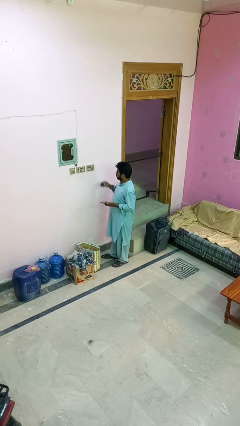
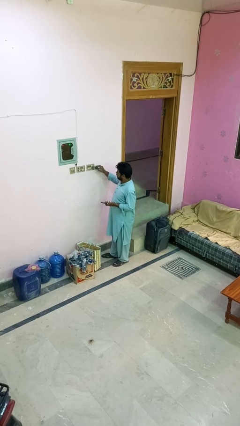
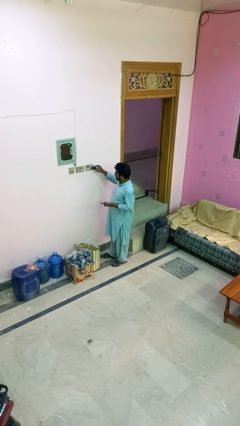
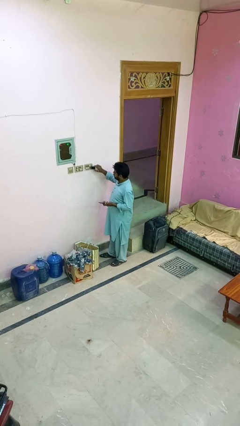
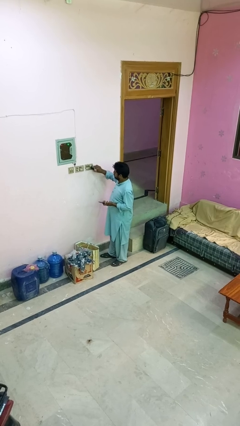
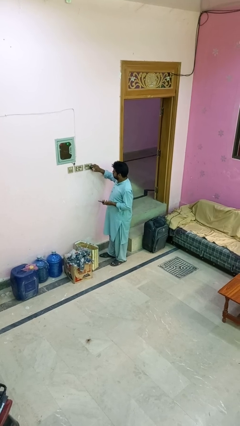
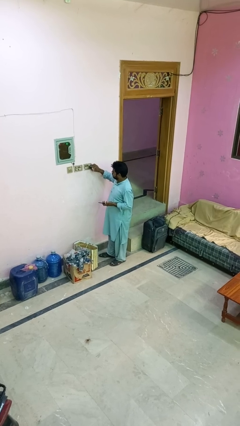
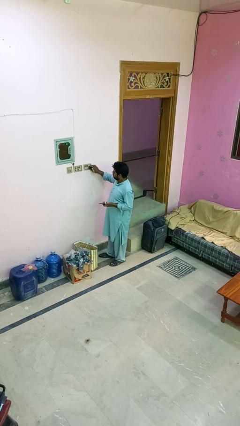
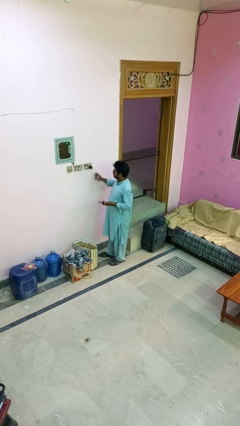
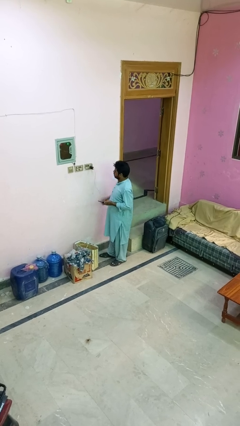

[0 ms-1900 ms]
person plugs into electrical socket

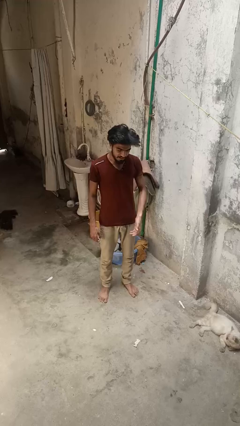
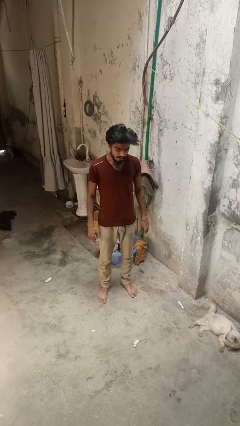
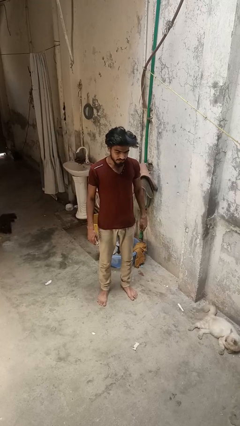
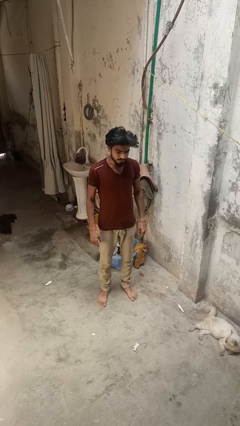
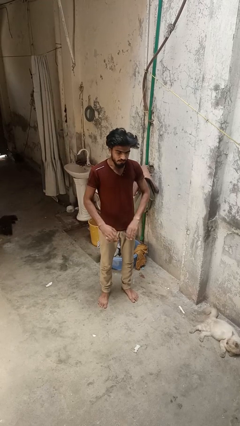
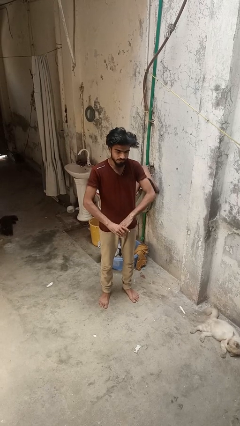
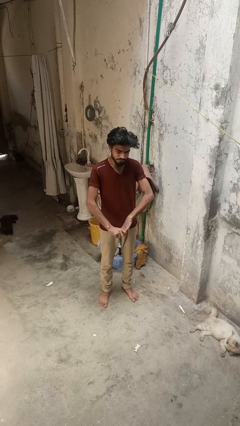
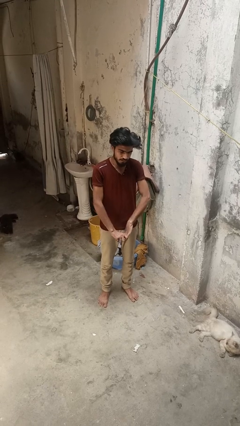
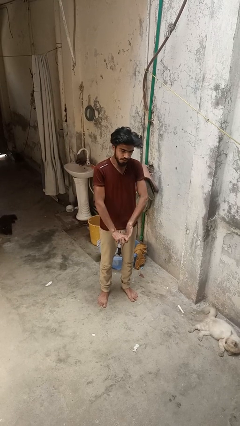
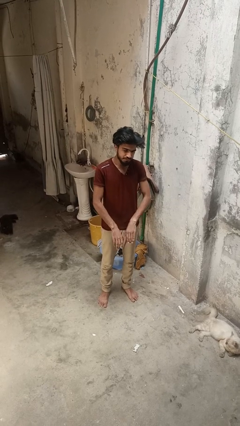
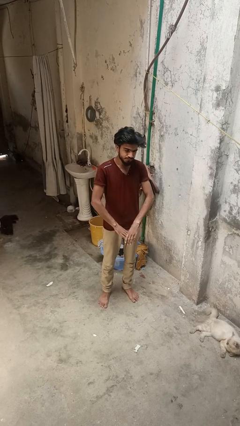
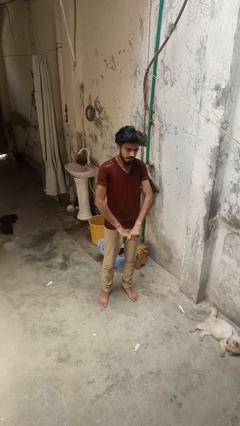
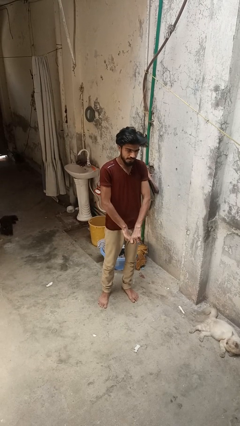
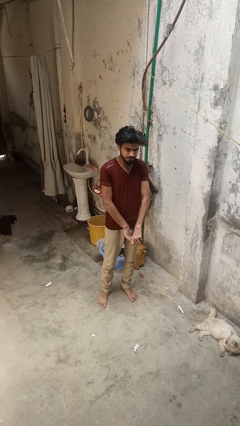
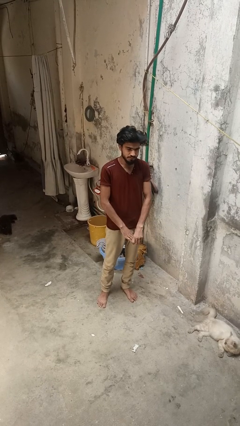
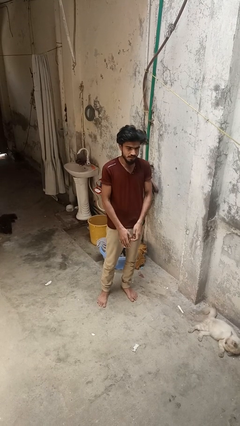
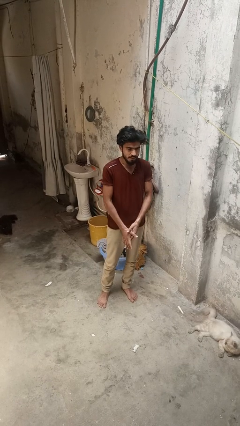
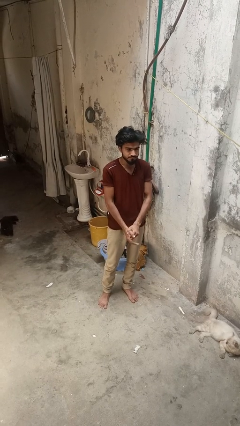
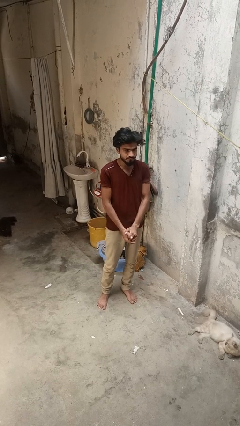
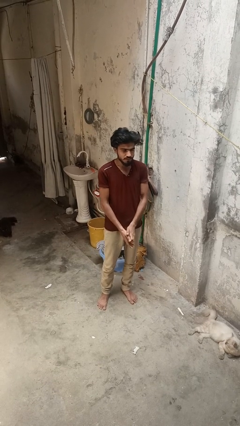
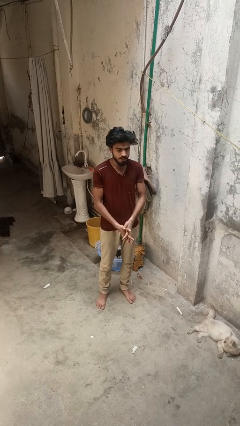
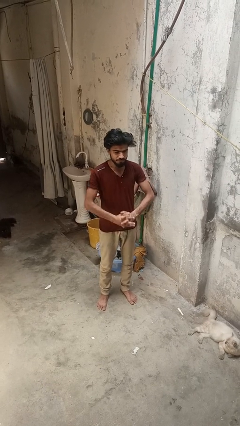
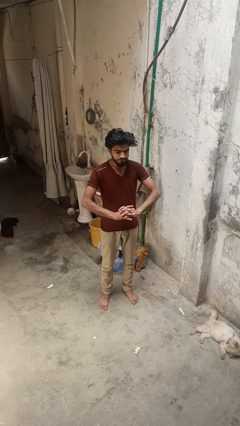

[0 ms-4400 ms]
person cracks knuckles

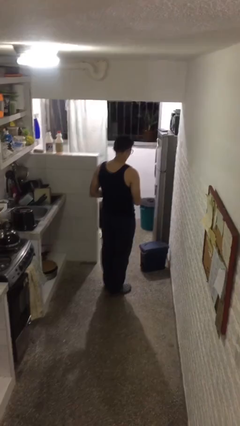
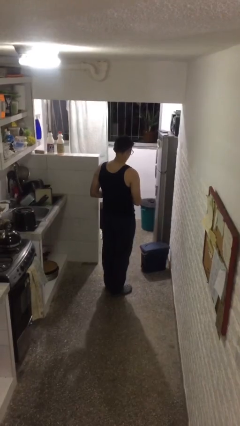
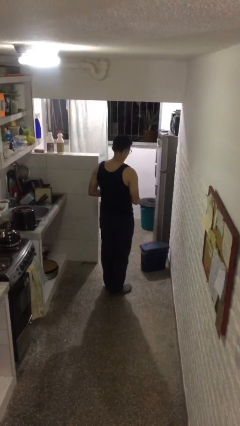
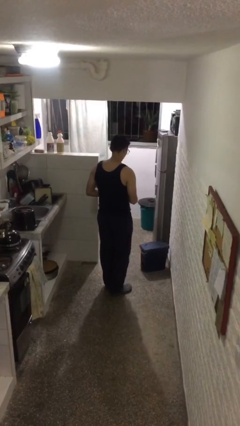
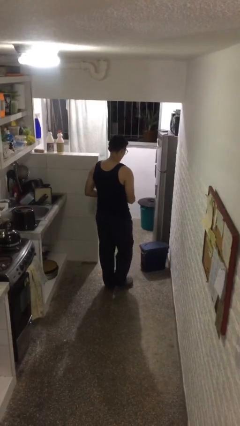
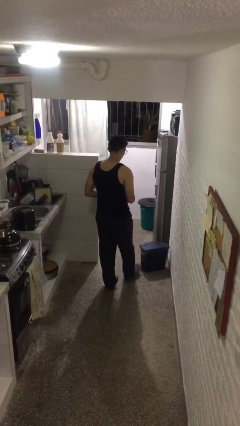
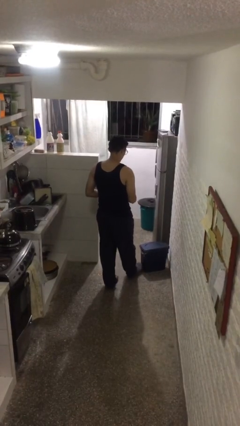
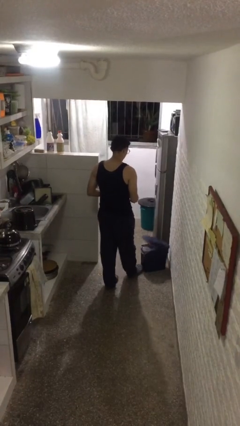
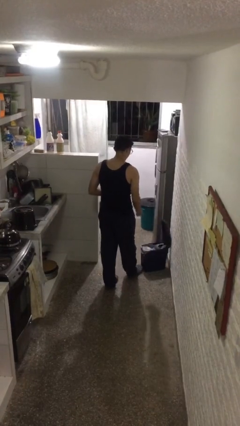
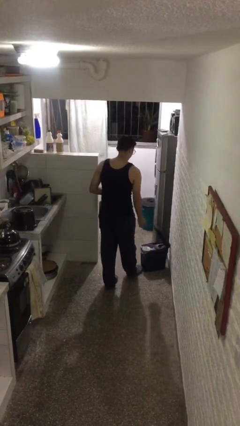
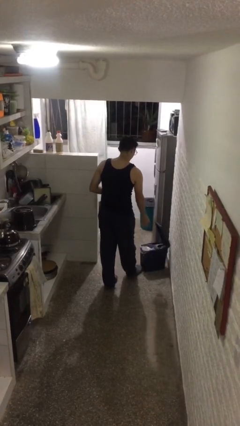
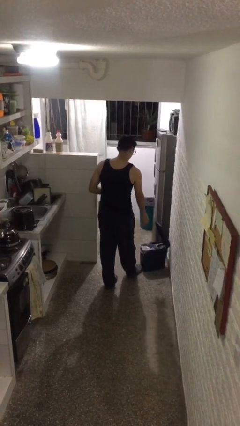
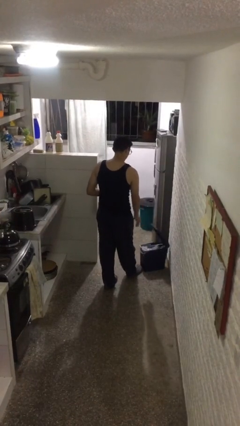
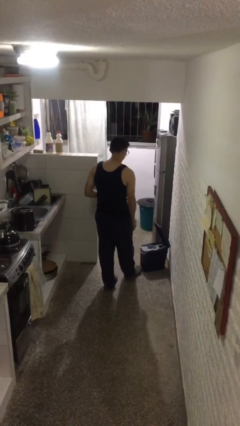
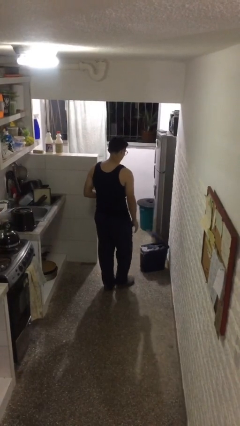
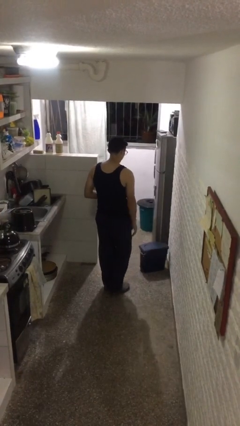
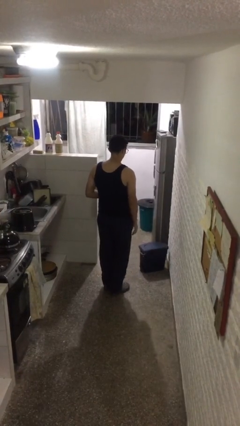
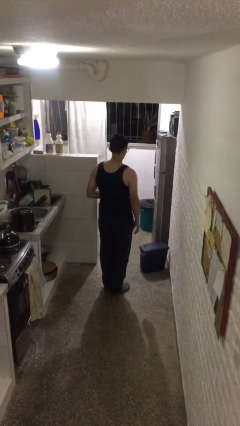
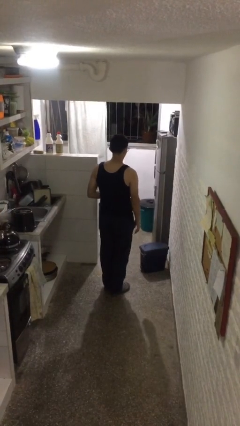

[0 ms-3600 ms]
person discards trash

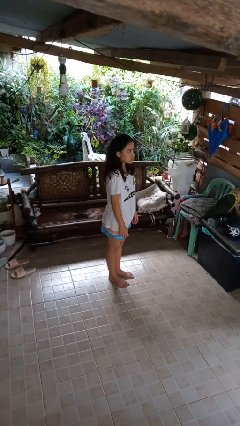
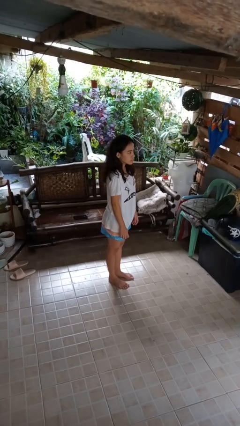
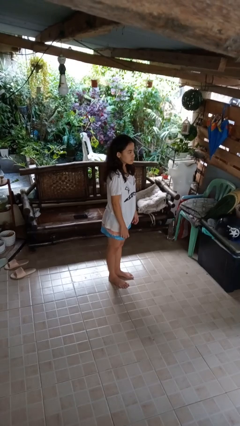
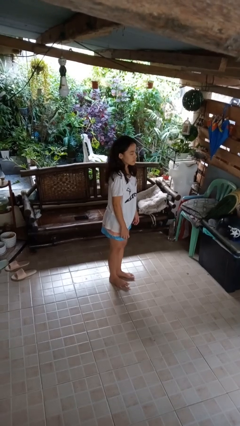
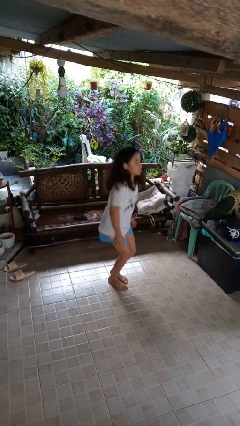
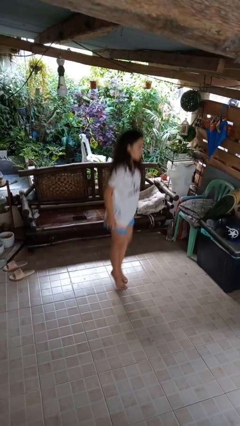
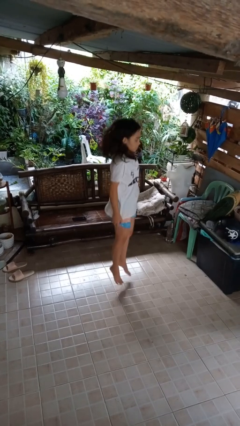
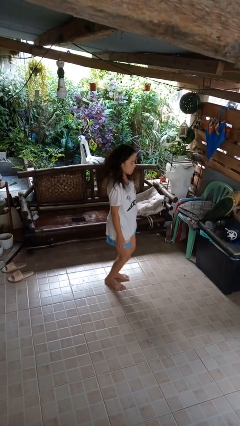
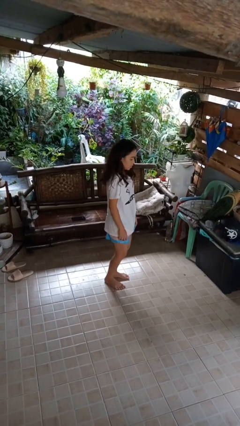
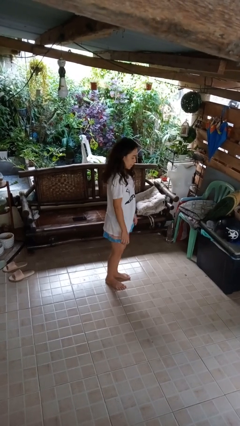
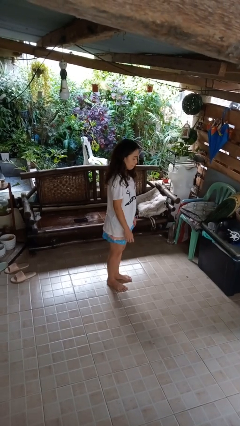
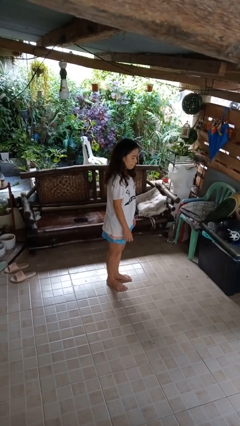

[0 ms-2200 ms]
person jumps

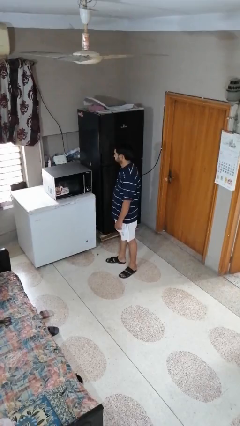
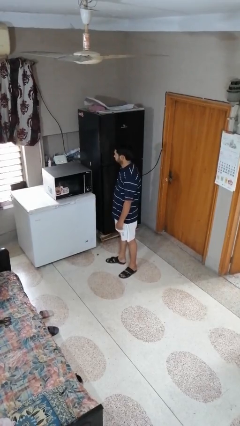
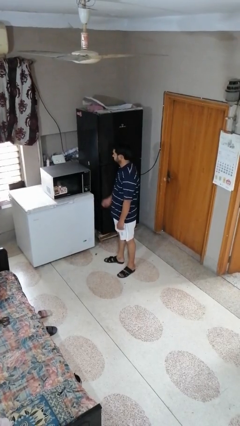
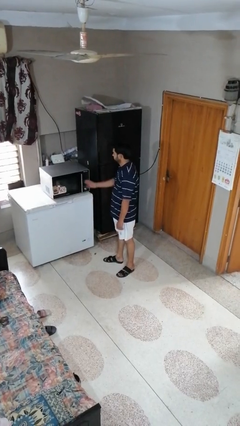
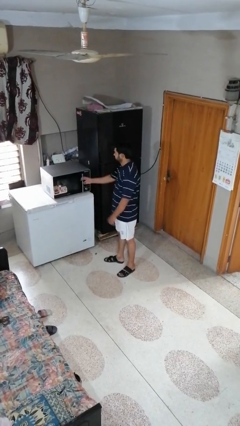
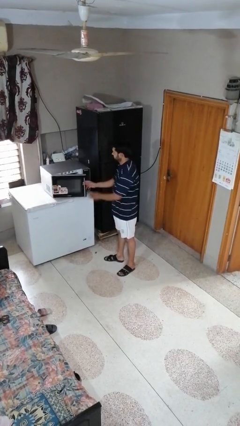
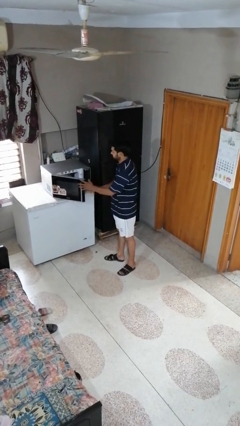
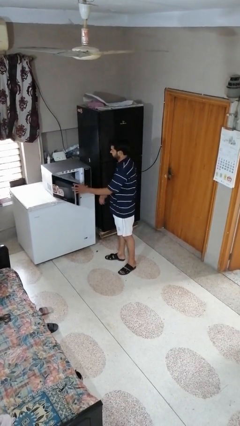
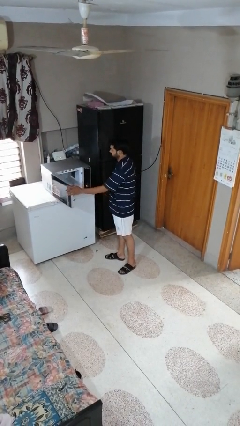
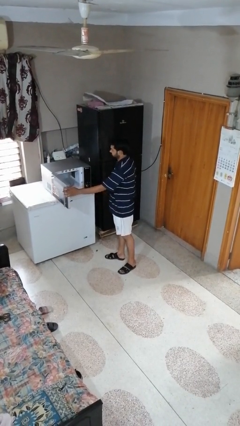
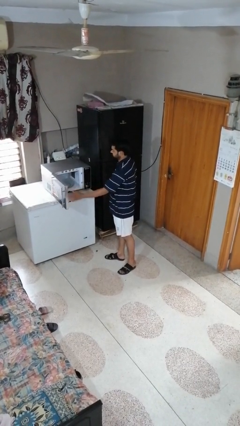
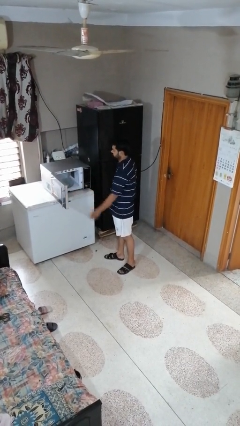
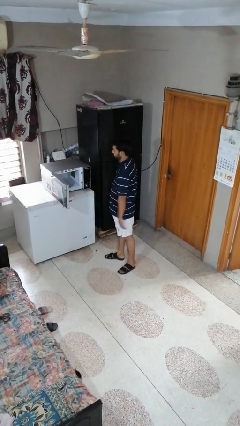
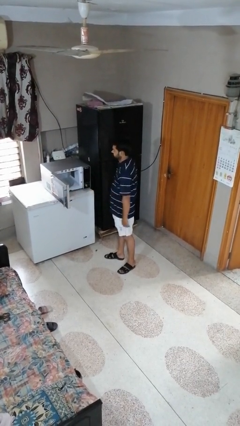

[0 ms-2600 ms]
person opens microwave

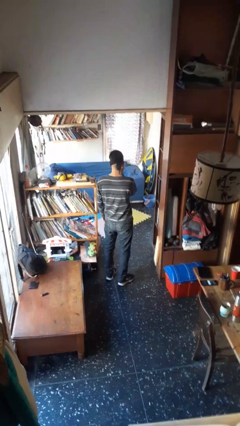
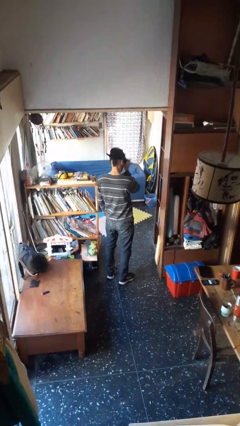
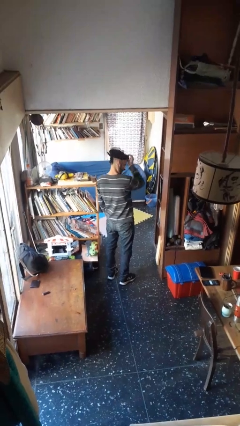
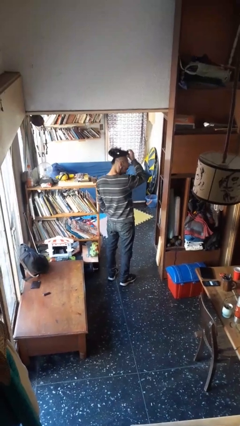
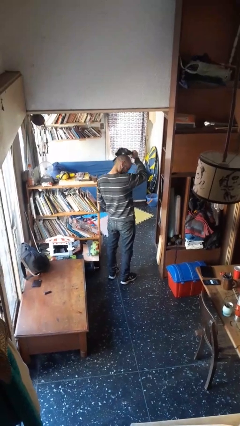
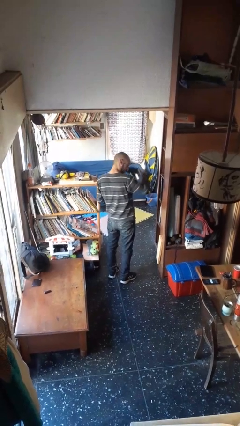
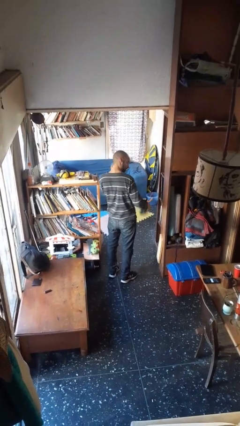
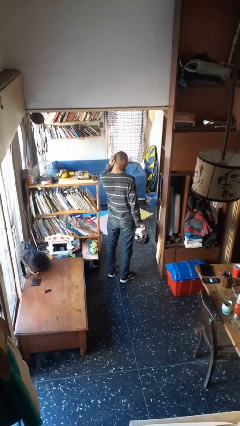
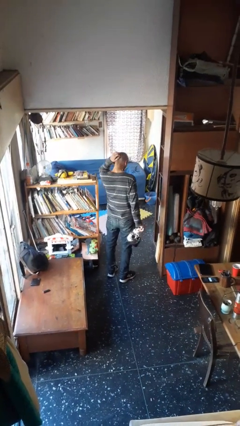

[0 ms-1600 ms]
person takes off facemask

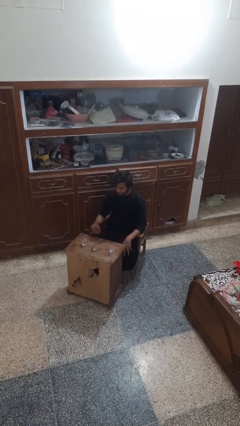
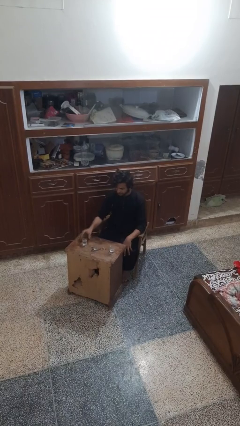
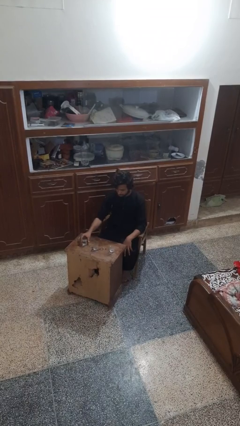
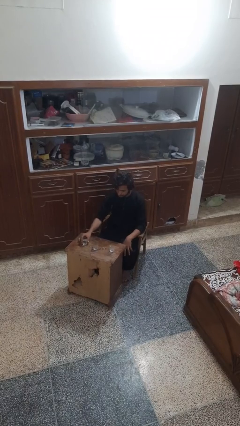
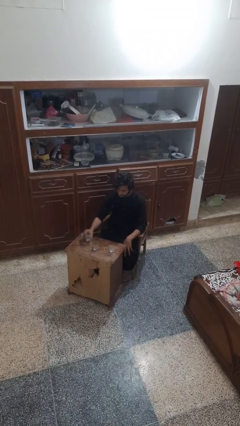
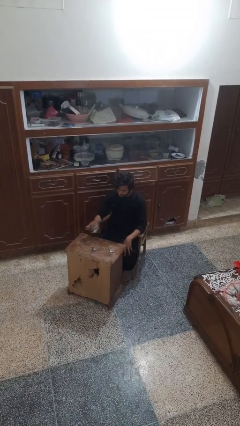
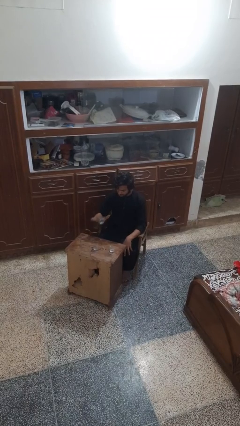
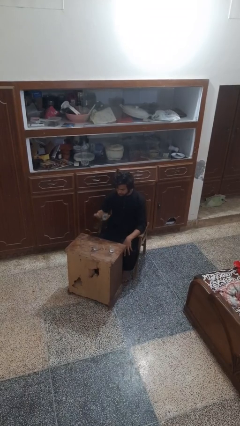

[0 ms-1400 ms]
person picks up object from table
